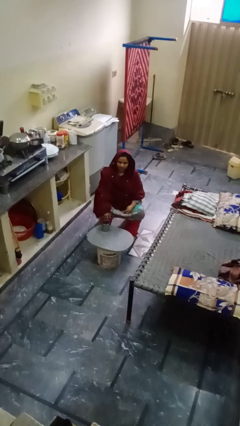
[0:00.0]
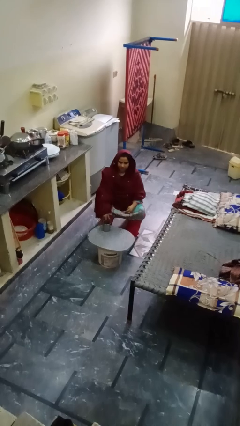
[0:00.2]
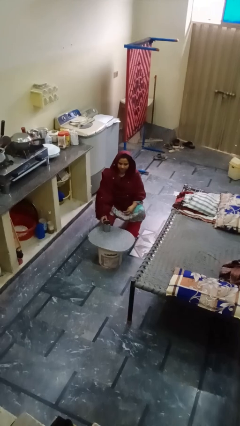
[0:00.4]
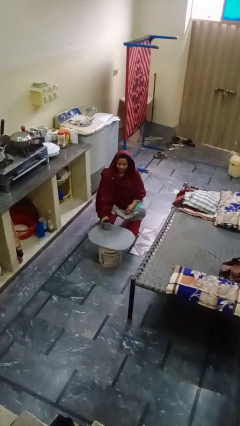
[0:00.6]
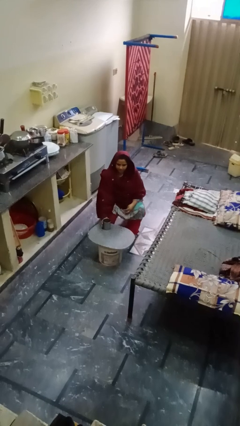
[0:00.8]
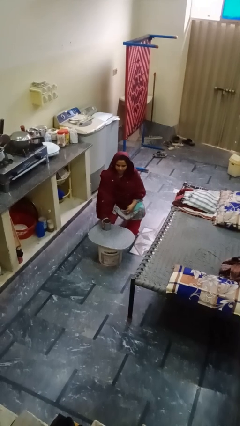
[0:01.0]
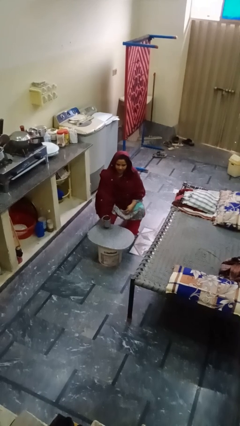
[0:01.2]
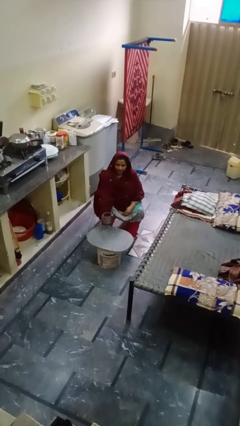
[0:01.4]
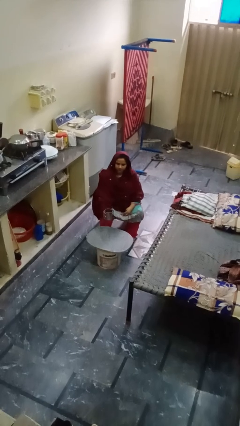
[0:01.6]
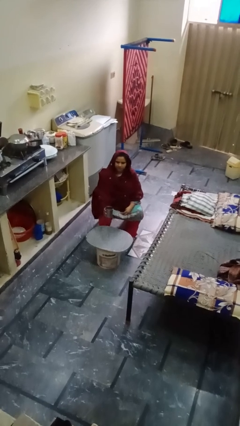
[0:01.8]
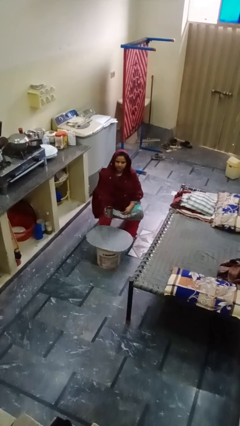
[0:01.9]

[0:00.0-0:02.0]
person picks up object from table

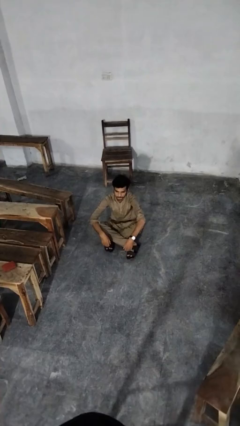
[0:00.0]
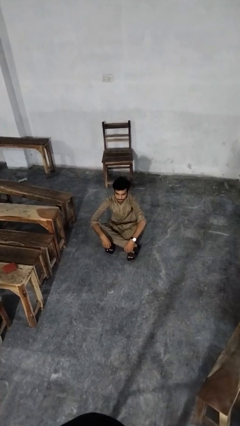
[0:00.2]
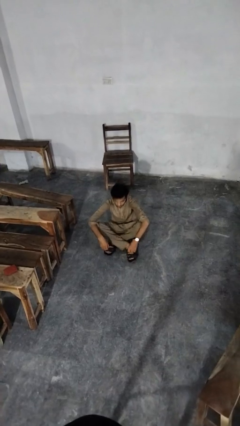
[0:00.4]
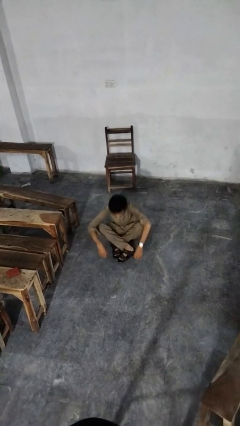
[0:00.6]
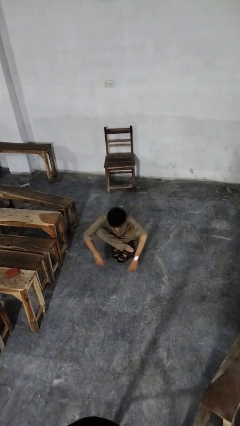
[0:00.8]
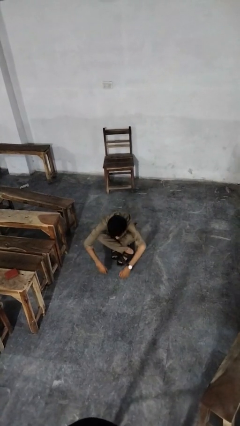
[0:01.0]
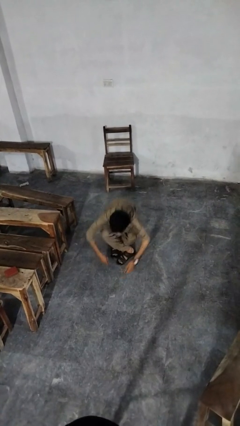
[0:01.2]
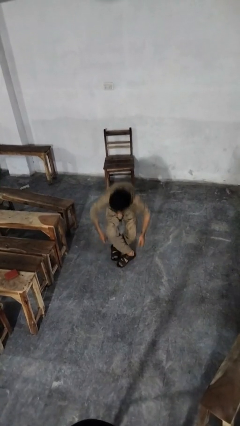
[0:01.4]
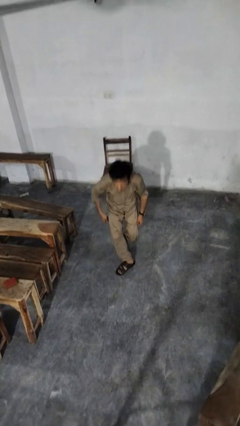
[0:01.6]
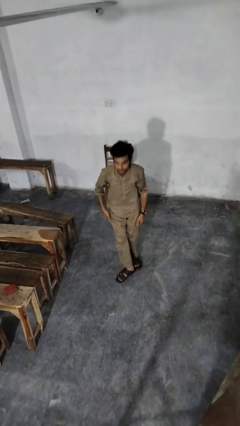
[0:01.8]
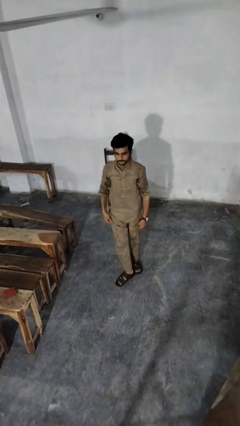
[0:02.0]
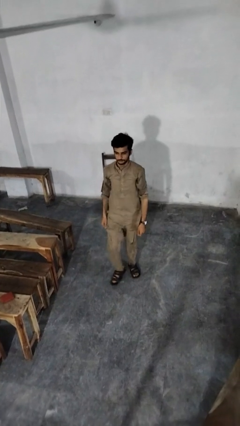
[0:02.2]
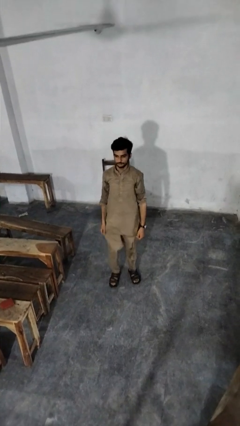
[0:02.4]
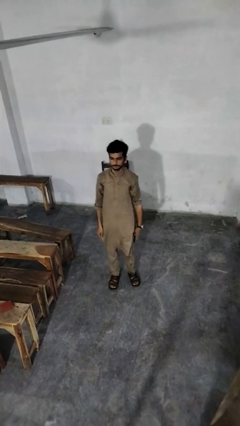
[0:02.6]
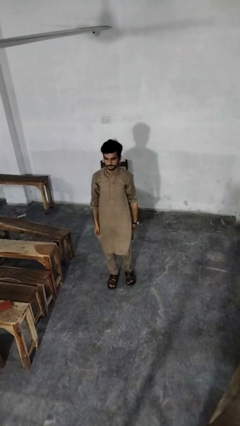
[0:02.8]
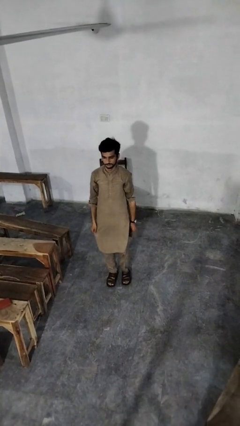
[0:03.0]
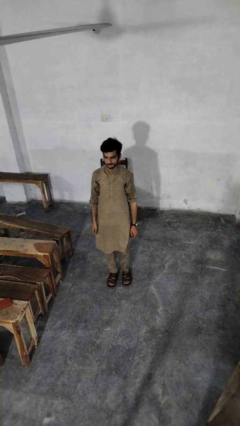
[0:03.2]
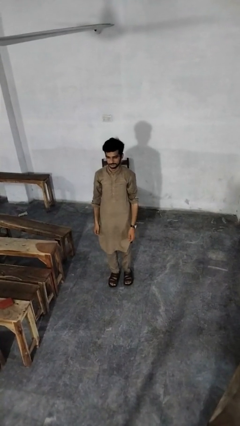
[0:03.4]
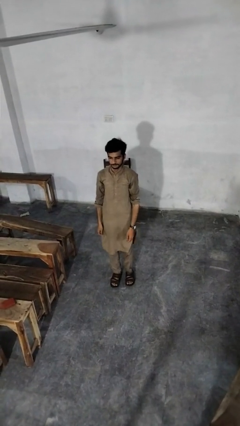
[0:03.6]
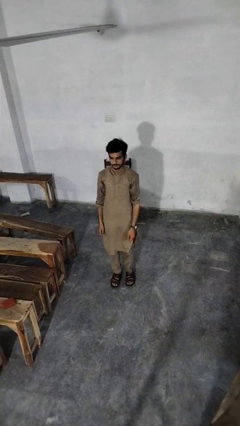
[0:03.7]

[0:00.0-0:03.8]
person stands up from floor

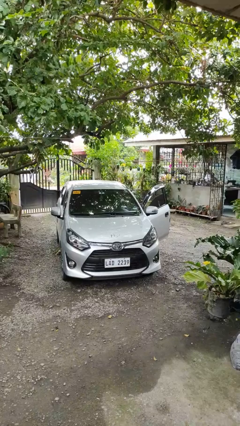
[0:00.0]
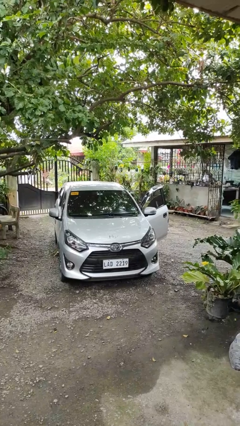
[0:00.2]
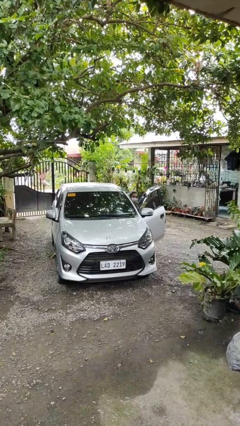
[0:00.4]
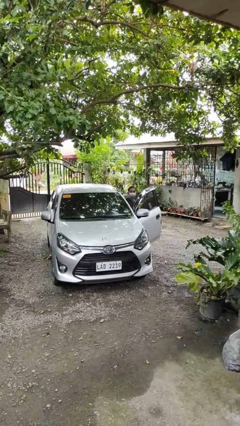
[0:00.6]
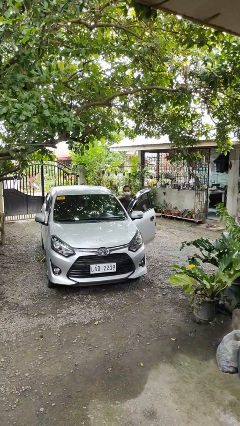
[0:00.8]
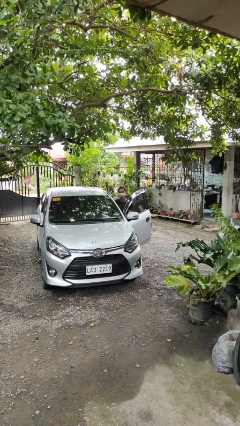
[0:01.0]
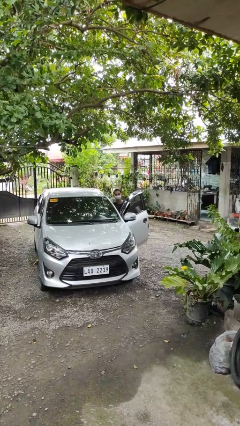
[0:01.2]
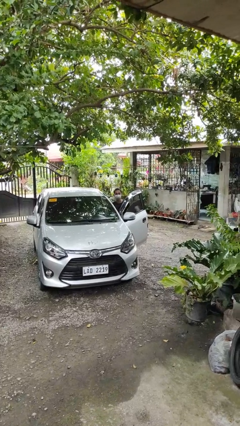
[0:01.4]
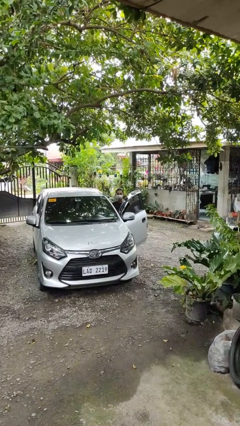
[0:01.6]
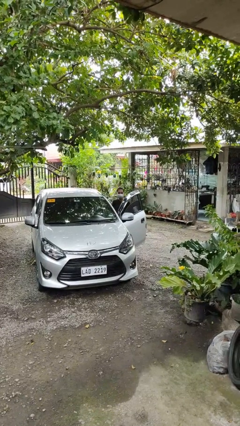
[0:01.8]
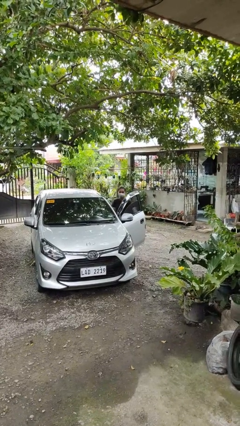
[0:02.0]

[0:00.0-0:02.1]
person exits car

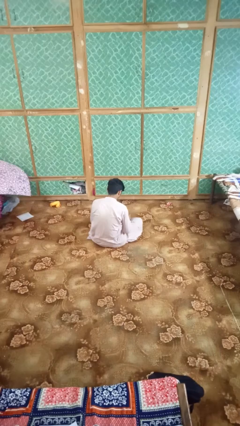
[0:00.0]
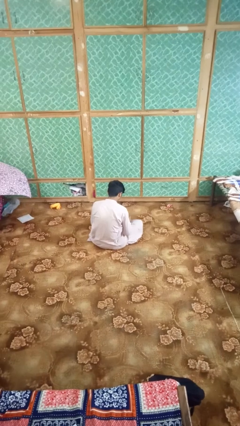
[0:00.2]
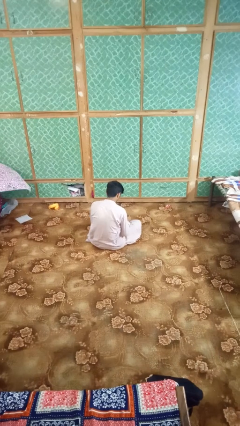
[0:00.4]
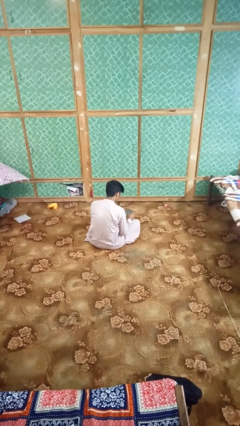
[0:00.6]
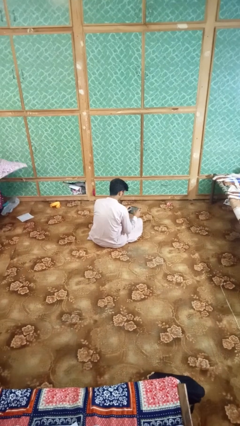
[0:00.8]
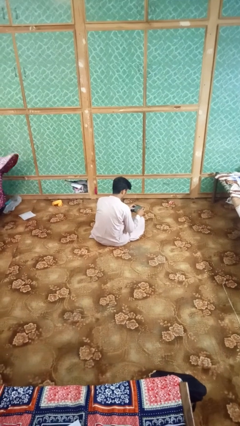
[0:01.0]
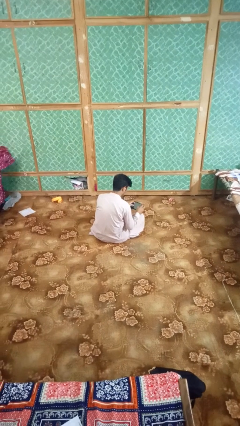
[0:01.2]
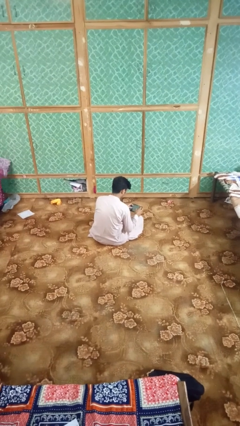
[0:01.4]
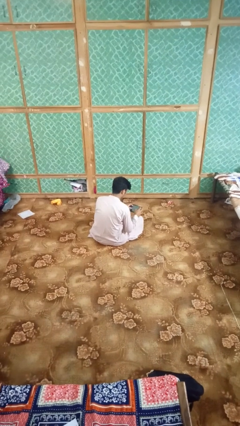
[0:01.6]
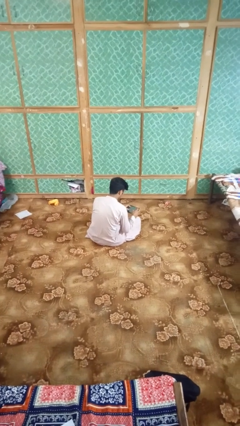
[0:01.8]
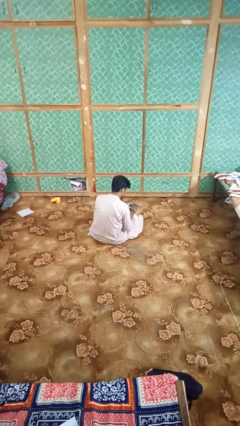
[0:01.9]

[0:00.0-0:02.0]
person interacts with tablet

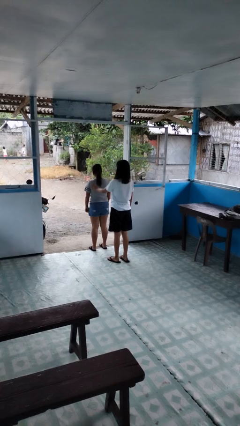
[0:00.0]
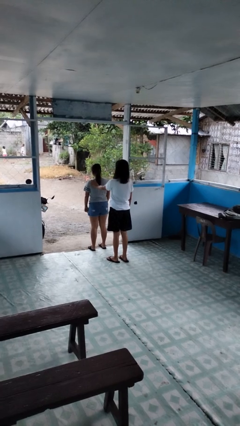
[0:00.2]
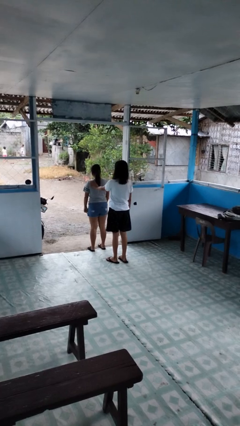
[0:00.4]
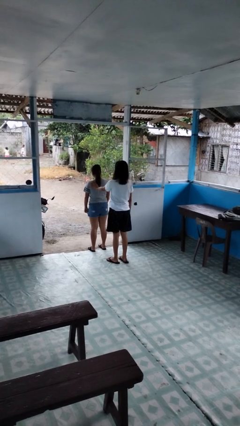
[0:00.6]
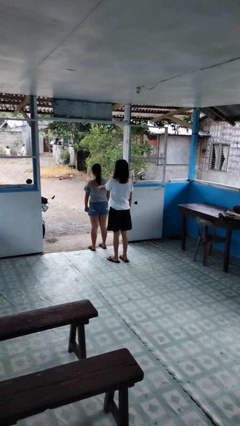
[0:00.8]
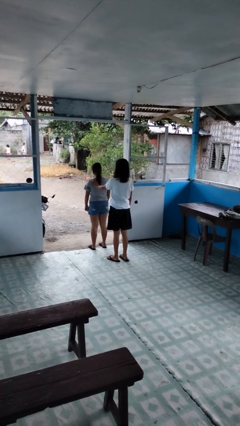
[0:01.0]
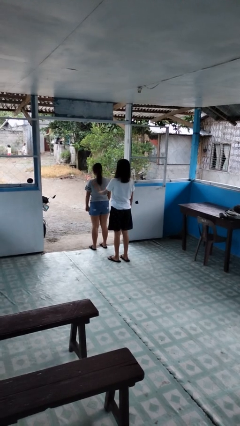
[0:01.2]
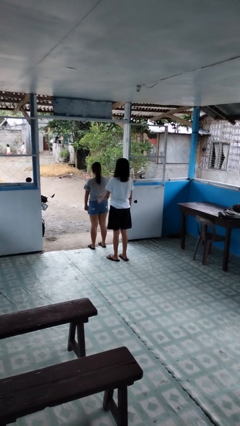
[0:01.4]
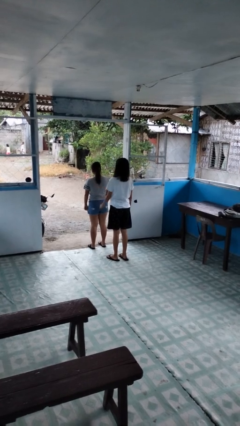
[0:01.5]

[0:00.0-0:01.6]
person touches back of person

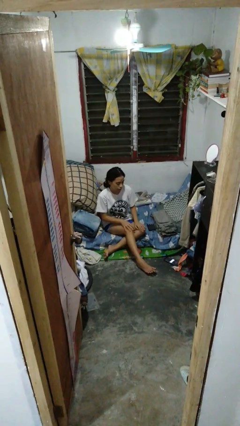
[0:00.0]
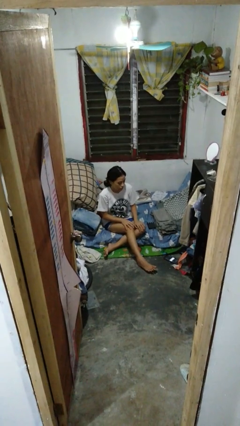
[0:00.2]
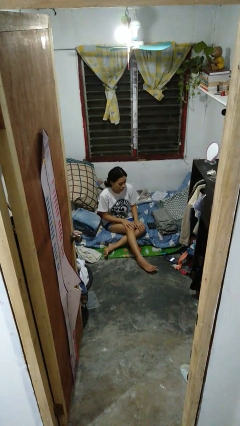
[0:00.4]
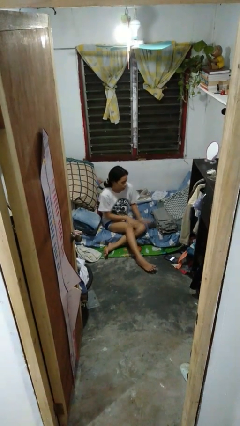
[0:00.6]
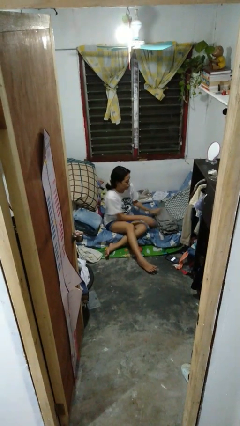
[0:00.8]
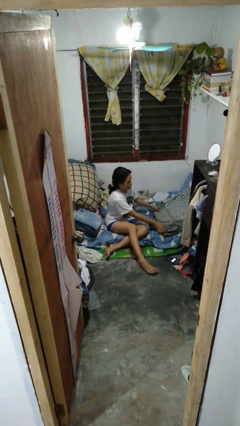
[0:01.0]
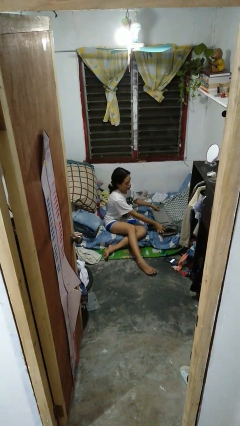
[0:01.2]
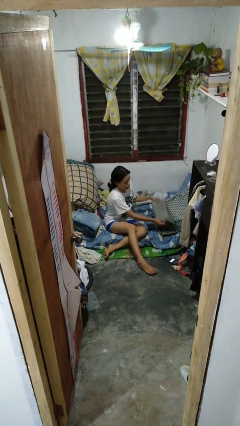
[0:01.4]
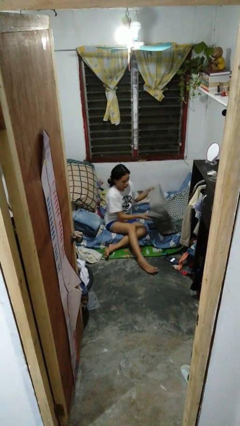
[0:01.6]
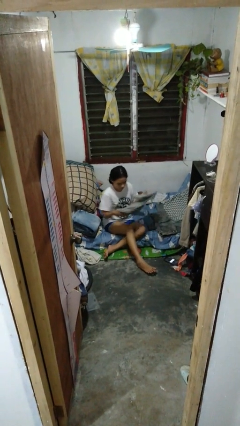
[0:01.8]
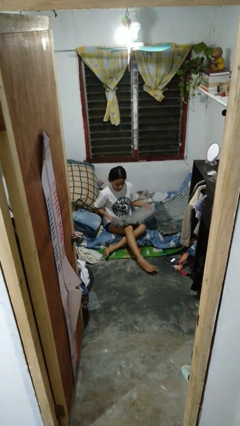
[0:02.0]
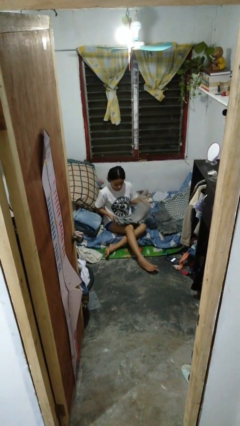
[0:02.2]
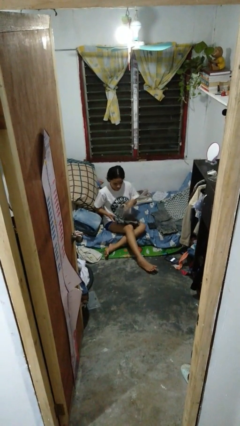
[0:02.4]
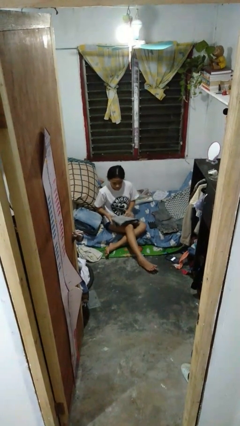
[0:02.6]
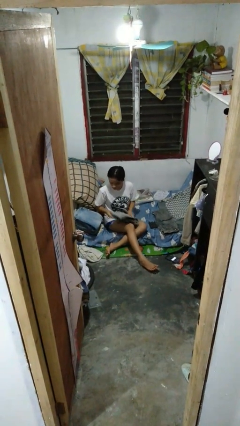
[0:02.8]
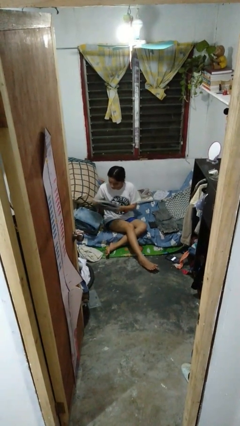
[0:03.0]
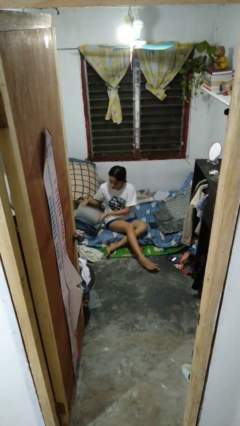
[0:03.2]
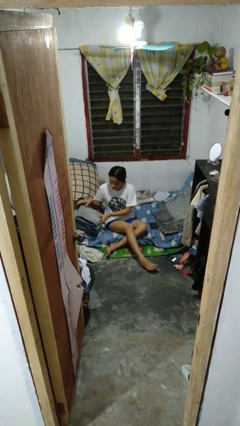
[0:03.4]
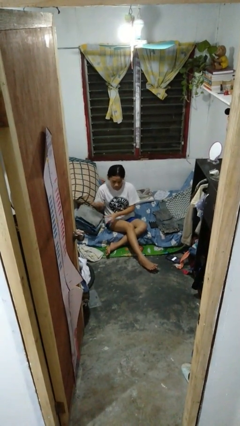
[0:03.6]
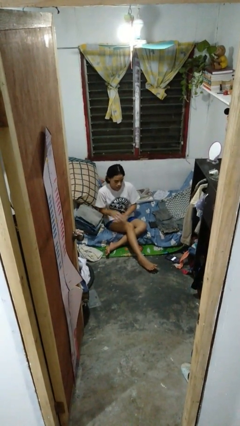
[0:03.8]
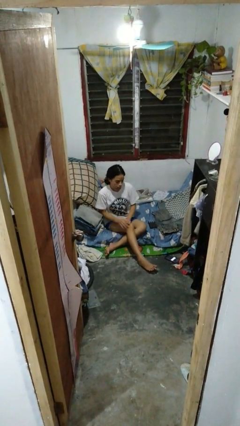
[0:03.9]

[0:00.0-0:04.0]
person folds pants

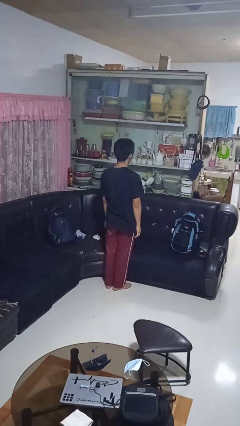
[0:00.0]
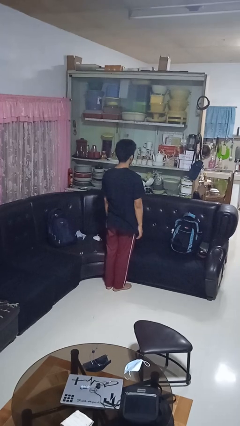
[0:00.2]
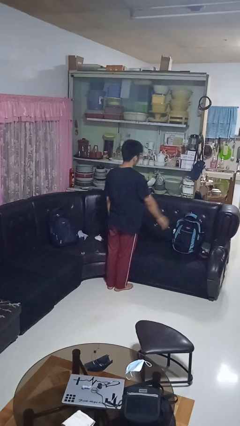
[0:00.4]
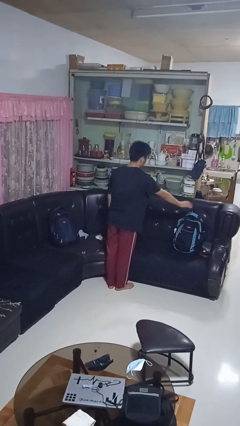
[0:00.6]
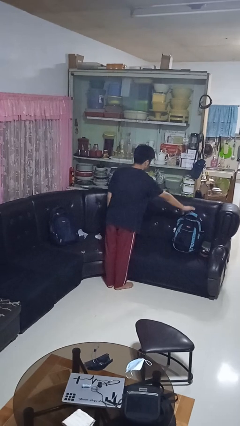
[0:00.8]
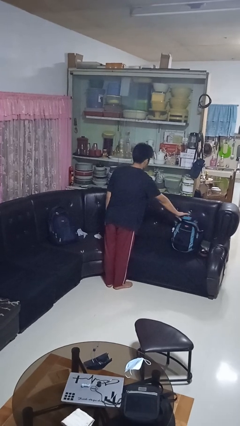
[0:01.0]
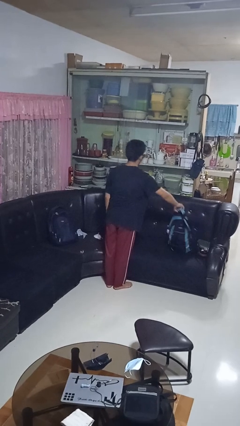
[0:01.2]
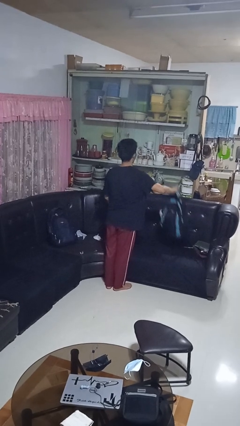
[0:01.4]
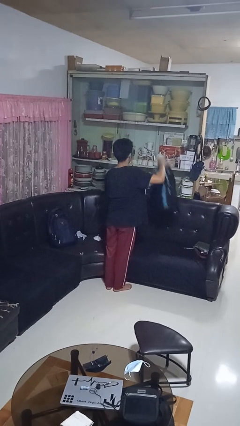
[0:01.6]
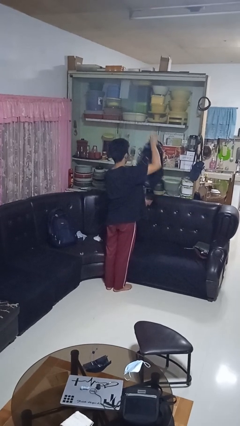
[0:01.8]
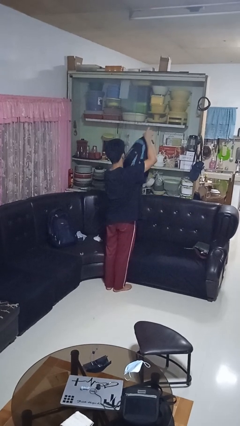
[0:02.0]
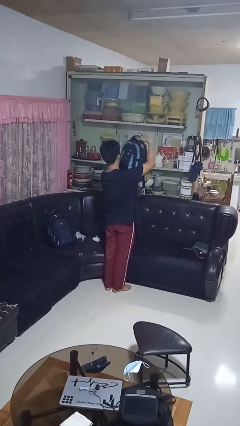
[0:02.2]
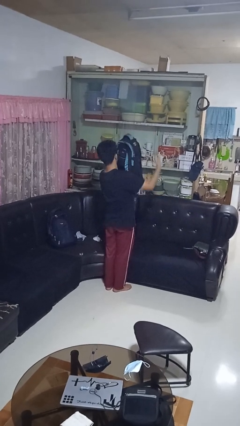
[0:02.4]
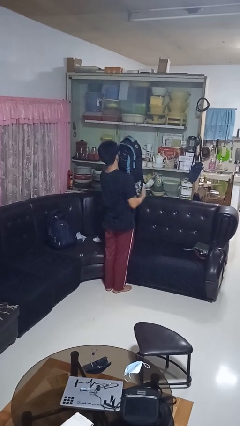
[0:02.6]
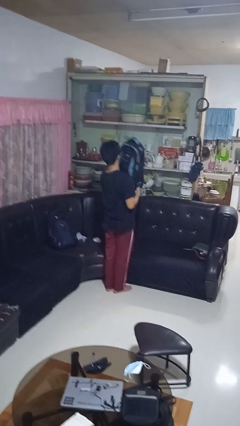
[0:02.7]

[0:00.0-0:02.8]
person picks up object from couch
